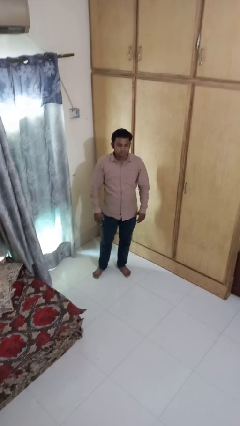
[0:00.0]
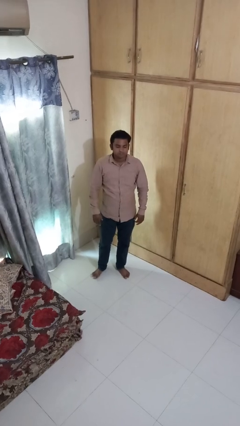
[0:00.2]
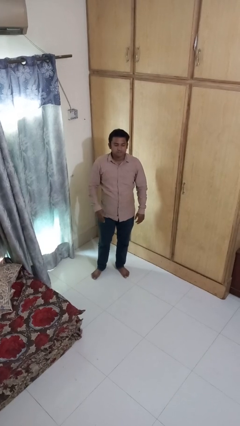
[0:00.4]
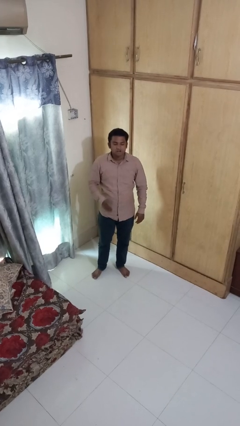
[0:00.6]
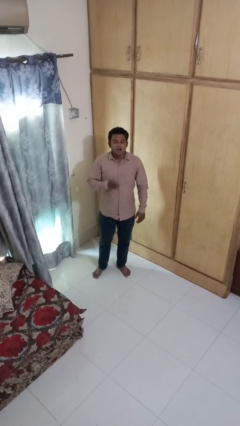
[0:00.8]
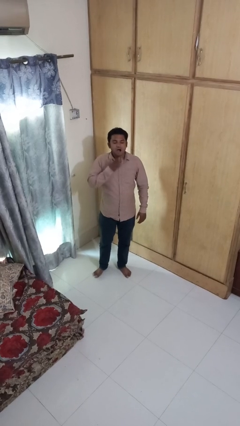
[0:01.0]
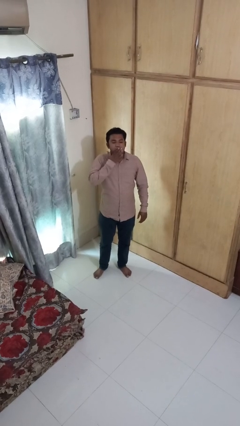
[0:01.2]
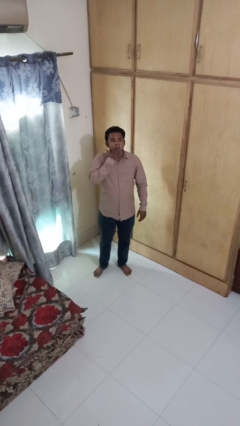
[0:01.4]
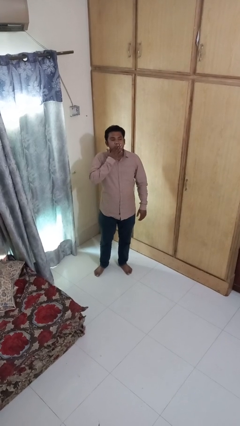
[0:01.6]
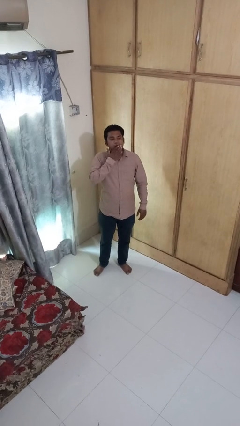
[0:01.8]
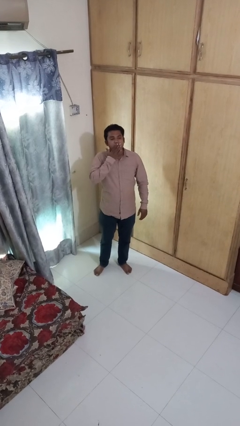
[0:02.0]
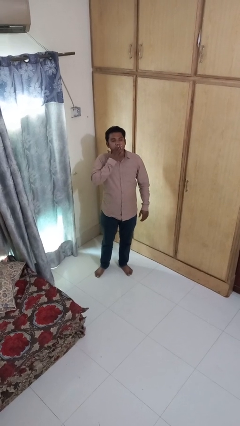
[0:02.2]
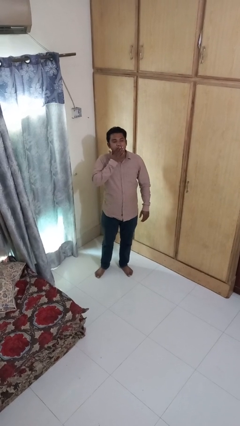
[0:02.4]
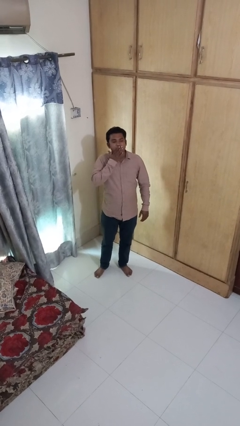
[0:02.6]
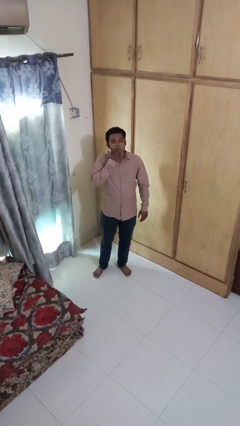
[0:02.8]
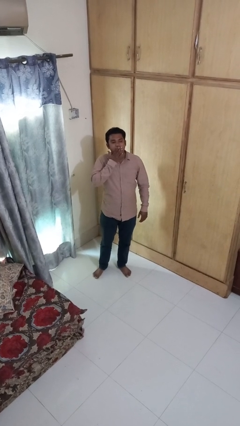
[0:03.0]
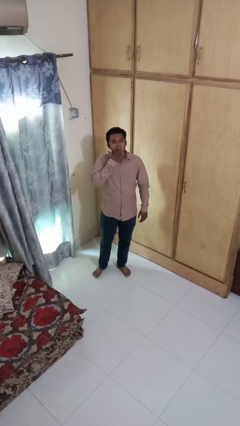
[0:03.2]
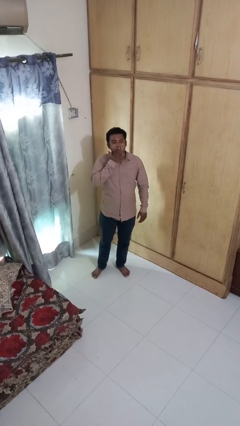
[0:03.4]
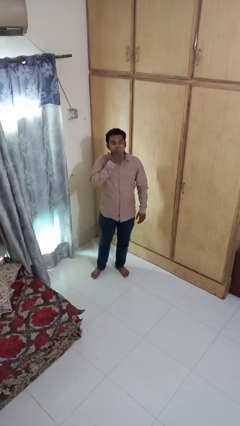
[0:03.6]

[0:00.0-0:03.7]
person yawns

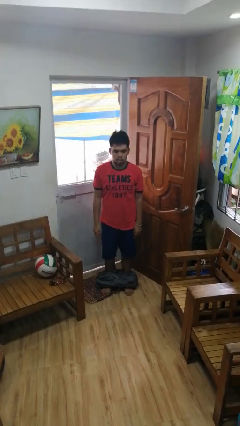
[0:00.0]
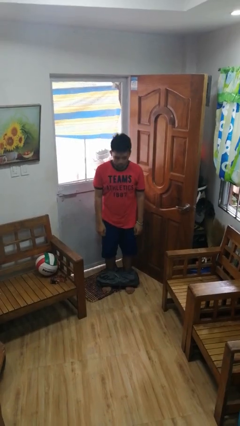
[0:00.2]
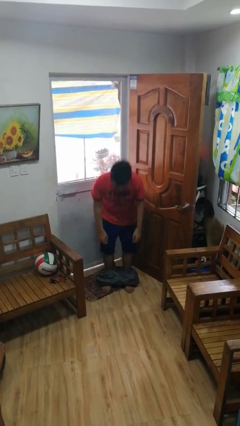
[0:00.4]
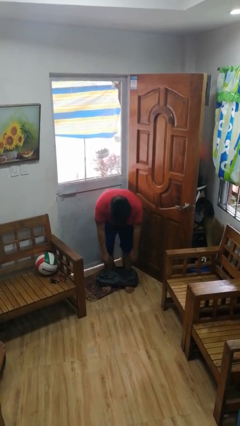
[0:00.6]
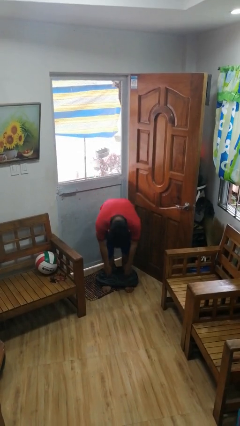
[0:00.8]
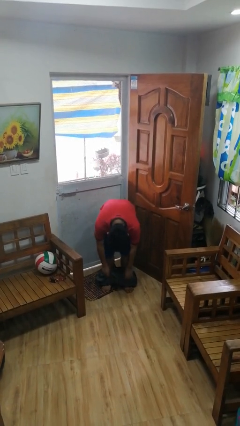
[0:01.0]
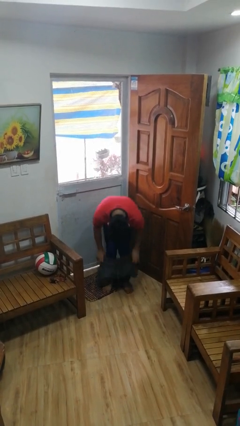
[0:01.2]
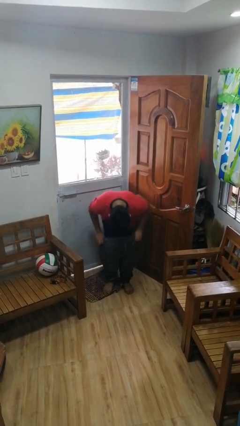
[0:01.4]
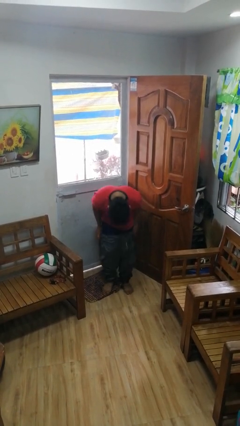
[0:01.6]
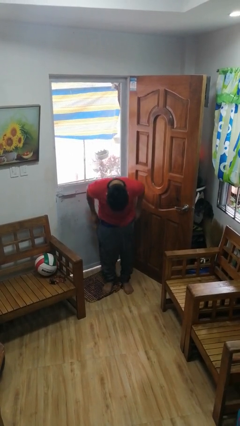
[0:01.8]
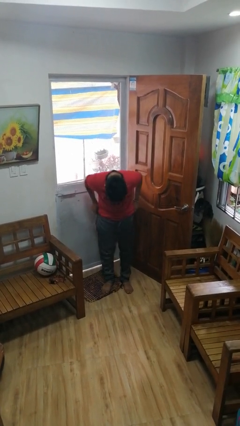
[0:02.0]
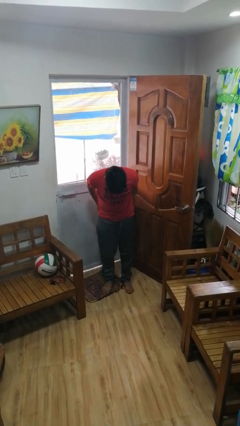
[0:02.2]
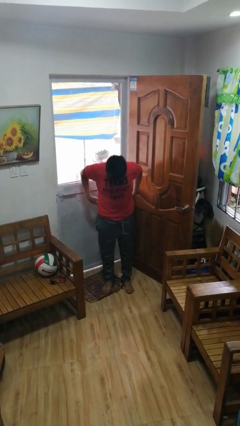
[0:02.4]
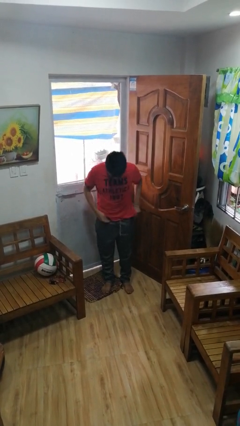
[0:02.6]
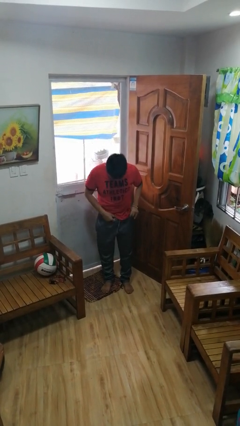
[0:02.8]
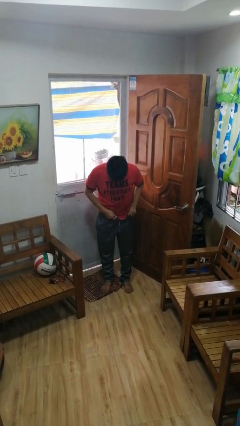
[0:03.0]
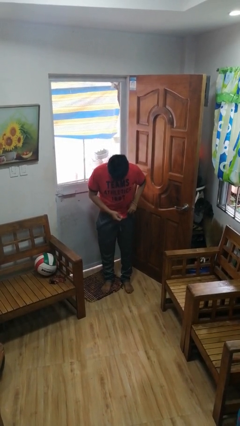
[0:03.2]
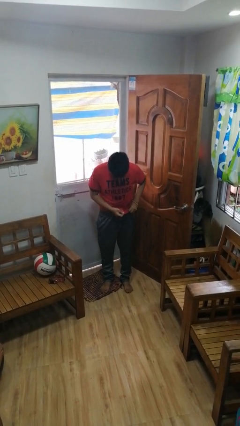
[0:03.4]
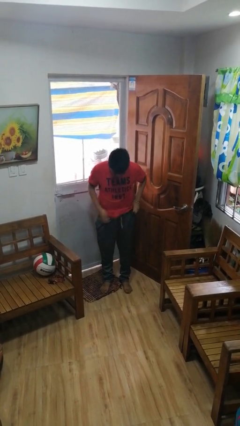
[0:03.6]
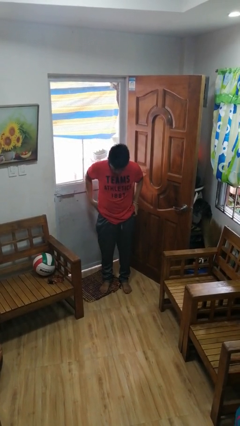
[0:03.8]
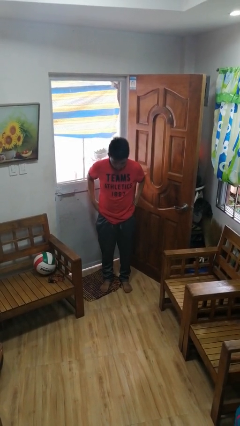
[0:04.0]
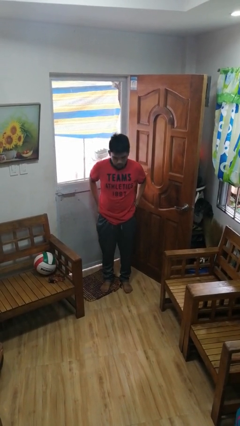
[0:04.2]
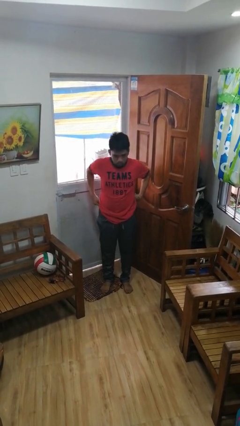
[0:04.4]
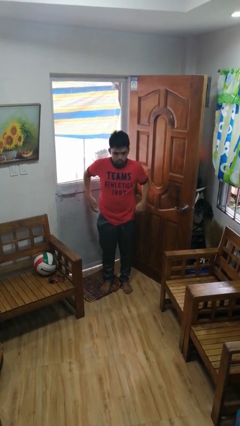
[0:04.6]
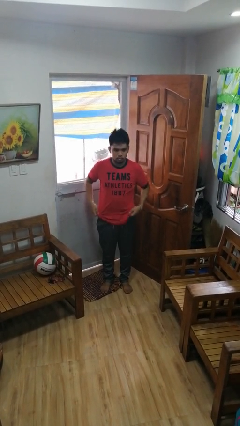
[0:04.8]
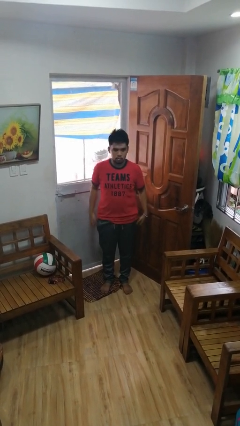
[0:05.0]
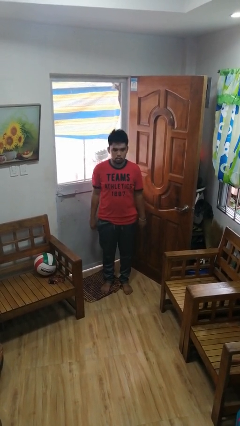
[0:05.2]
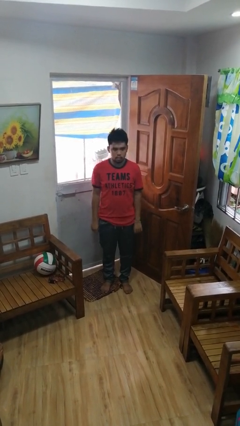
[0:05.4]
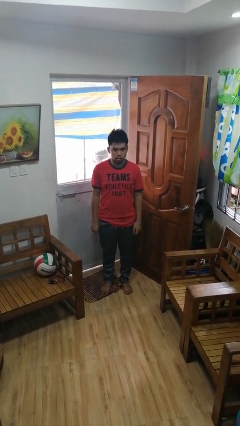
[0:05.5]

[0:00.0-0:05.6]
person puts on pants

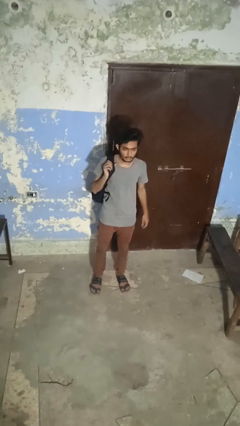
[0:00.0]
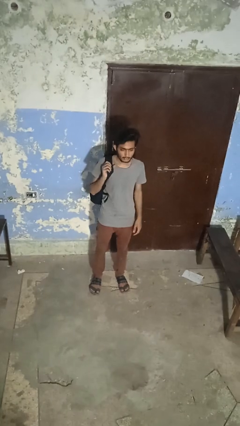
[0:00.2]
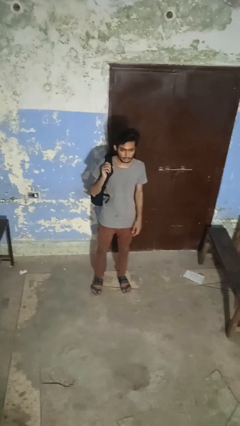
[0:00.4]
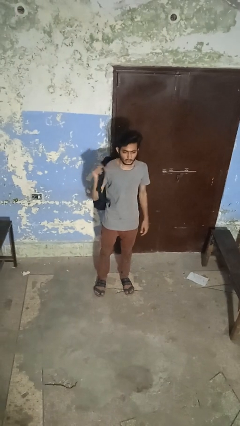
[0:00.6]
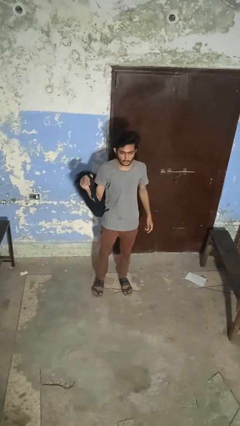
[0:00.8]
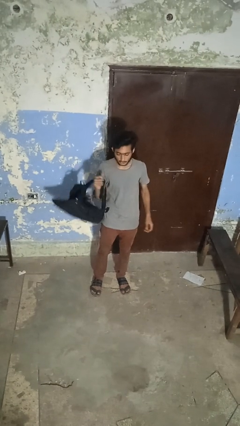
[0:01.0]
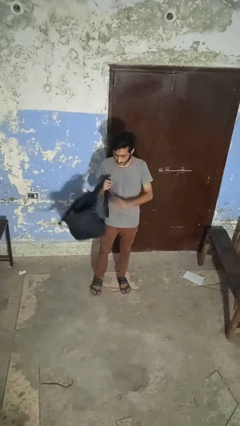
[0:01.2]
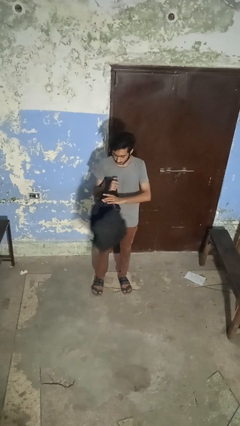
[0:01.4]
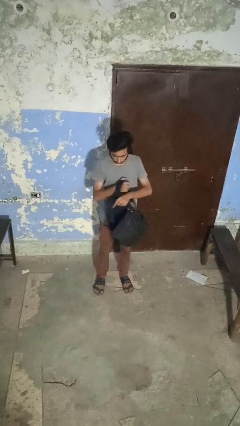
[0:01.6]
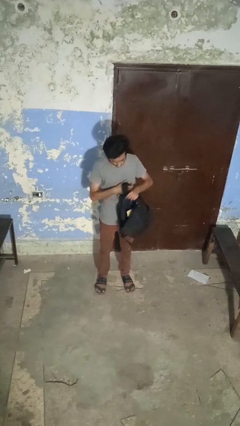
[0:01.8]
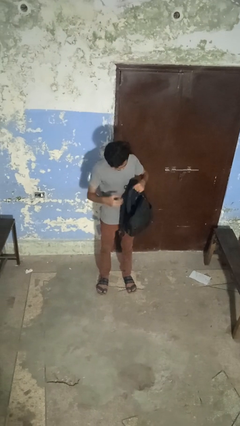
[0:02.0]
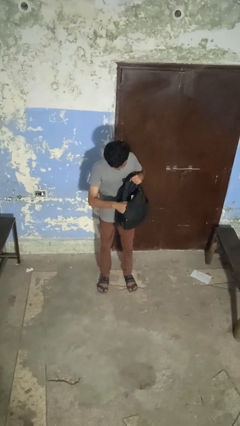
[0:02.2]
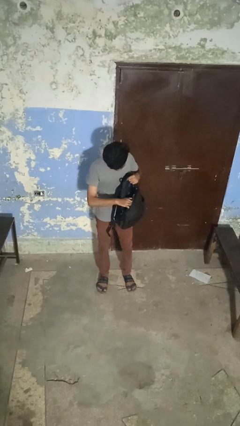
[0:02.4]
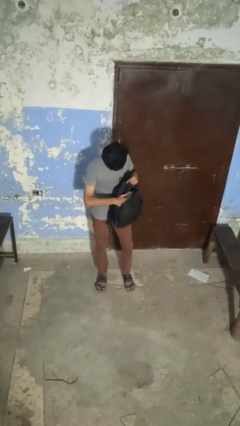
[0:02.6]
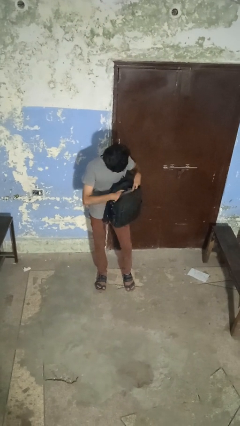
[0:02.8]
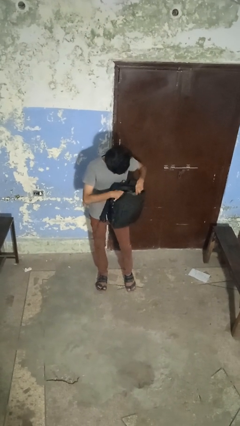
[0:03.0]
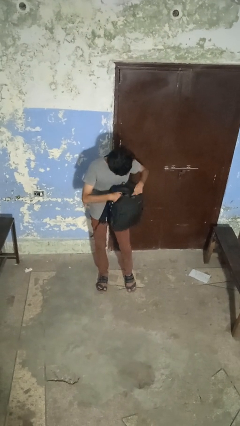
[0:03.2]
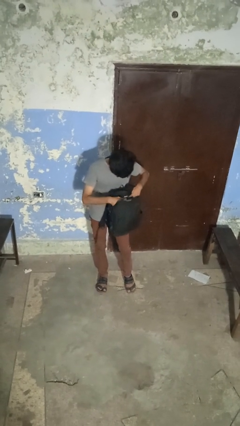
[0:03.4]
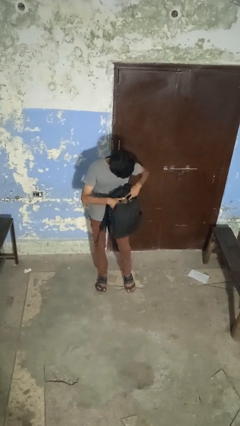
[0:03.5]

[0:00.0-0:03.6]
person searches in backpack

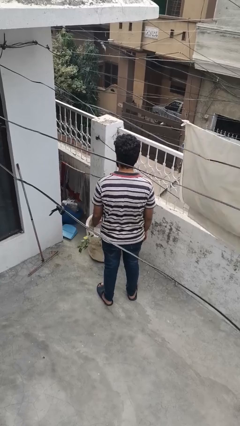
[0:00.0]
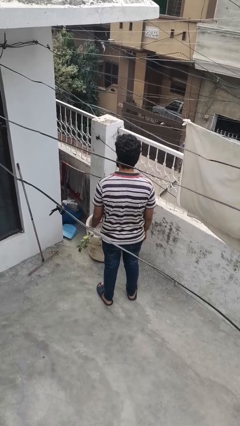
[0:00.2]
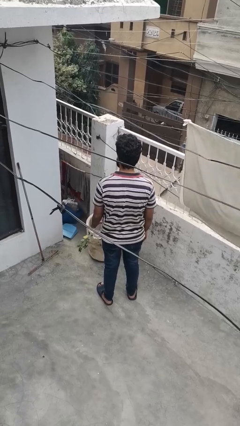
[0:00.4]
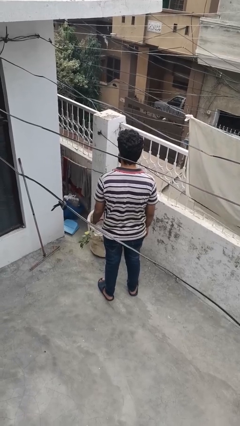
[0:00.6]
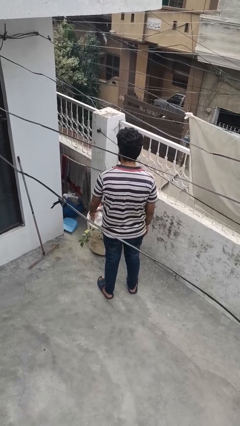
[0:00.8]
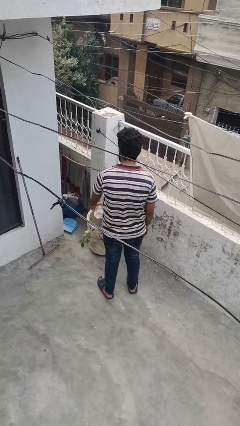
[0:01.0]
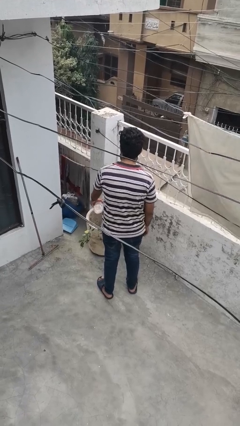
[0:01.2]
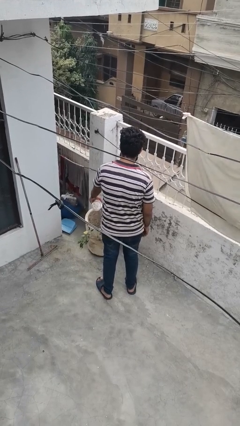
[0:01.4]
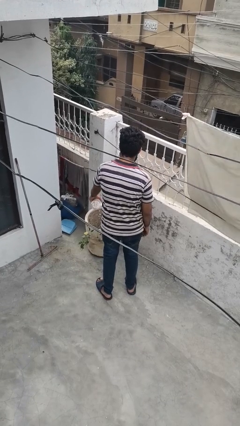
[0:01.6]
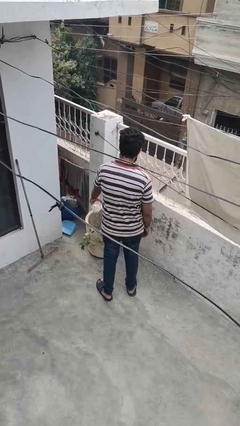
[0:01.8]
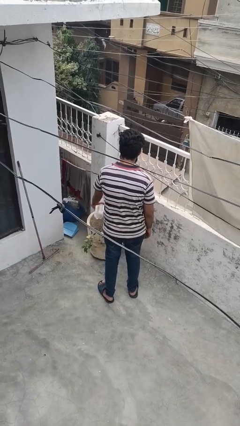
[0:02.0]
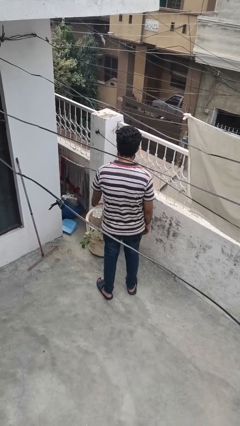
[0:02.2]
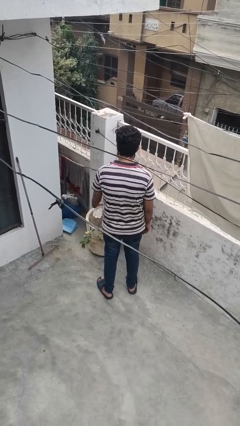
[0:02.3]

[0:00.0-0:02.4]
person waters houseplant

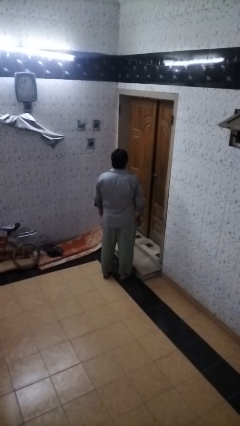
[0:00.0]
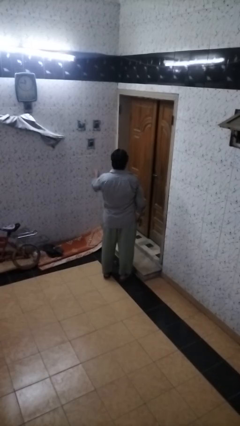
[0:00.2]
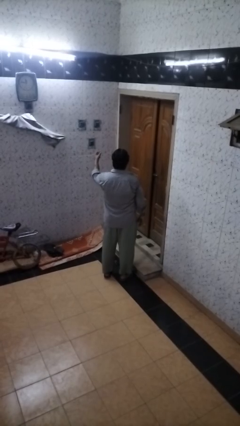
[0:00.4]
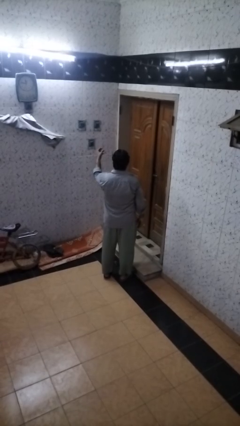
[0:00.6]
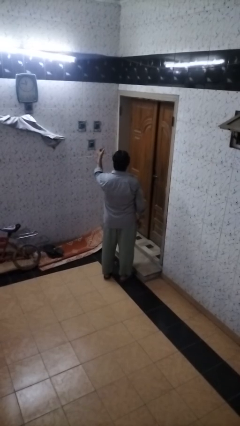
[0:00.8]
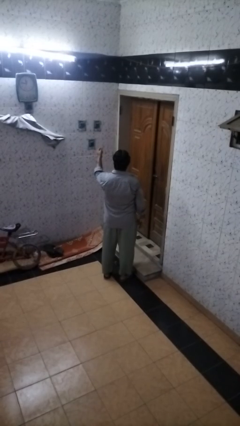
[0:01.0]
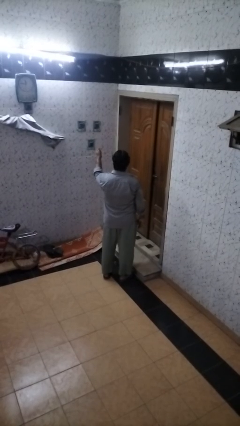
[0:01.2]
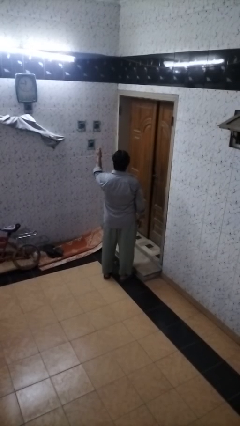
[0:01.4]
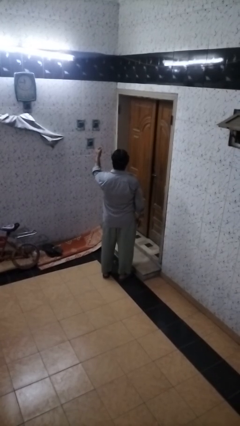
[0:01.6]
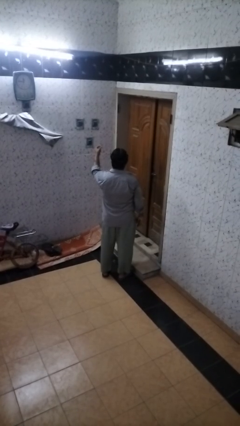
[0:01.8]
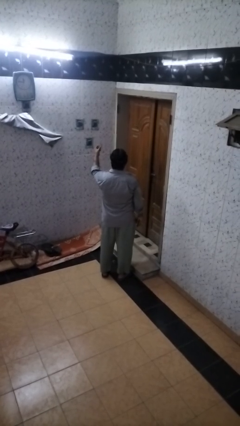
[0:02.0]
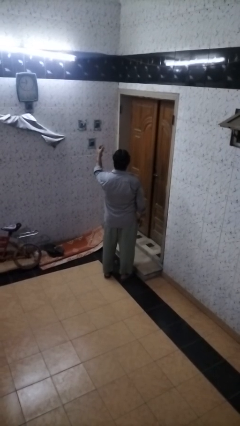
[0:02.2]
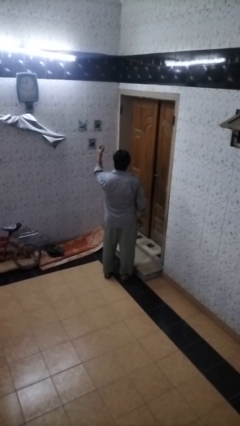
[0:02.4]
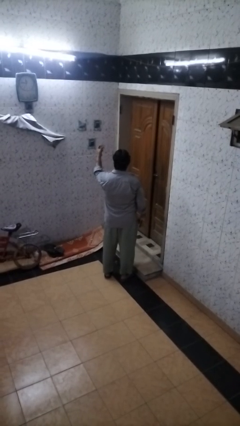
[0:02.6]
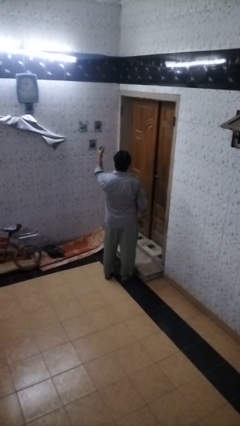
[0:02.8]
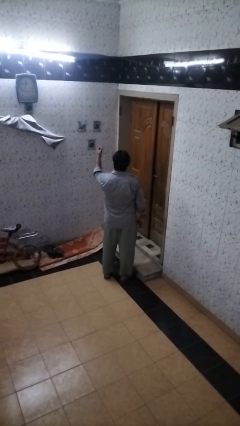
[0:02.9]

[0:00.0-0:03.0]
person snaps fingers
